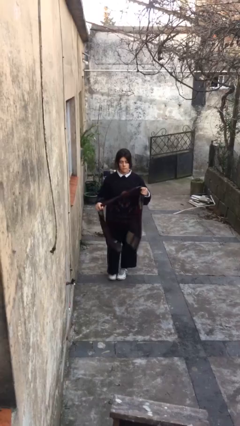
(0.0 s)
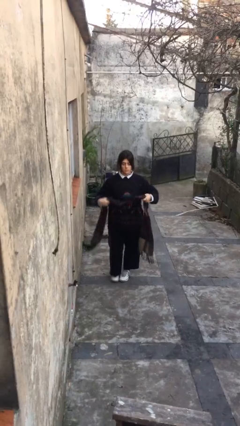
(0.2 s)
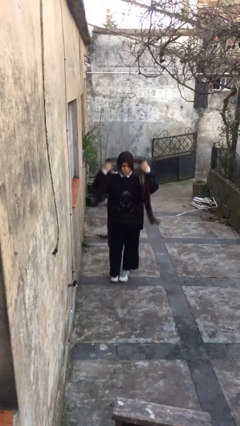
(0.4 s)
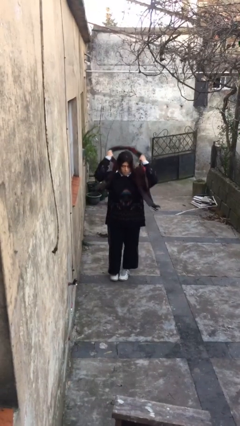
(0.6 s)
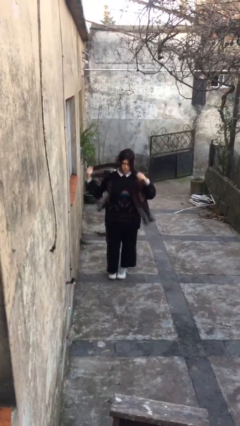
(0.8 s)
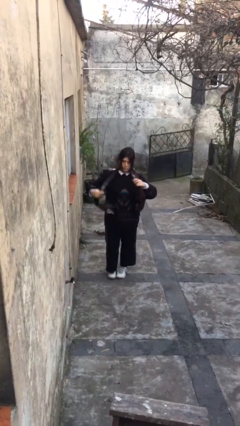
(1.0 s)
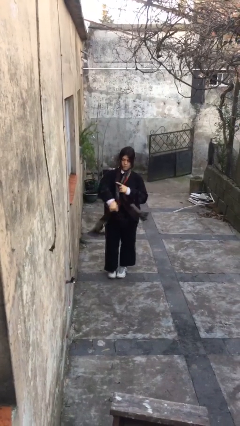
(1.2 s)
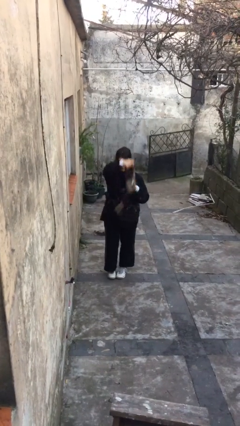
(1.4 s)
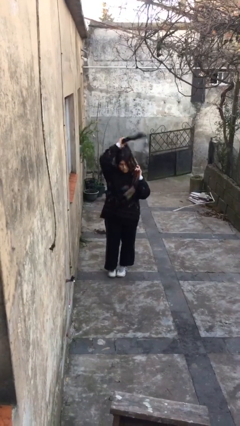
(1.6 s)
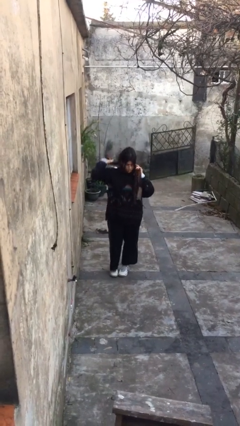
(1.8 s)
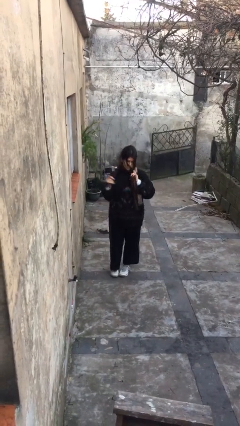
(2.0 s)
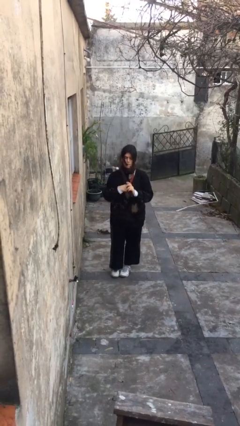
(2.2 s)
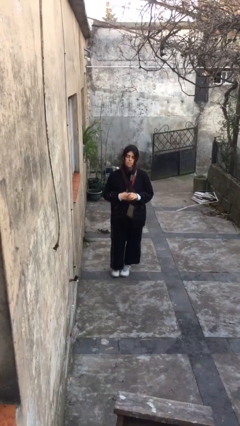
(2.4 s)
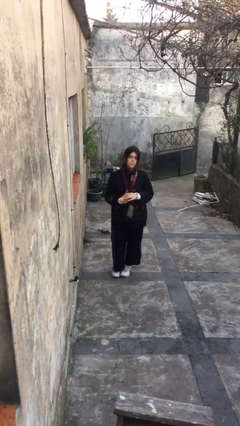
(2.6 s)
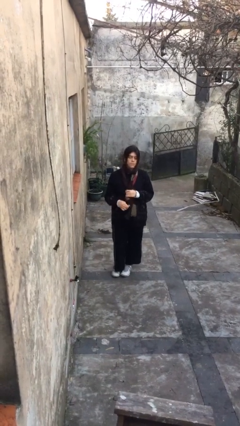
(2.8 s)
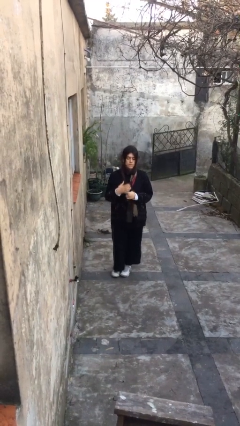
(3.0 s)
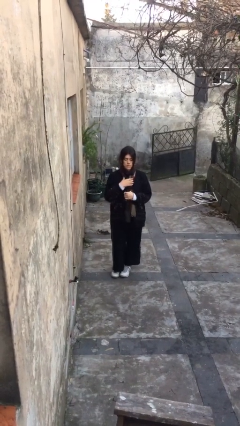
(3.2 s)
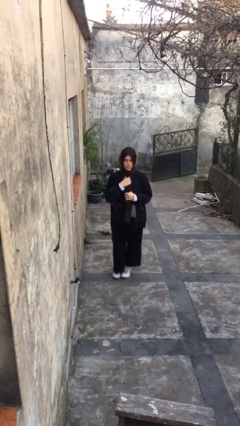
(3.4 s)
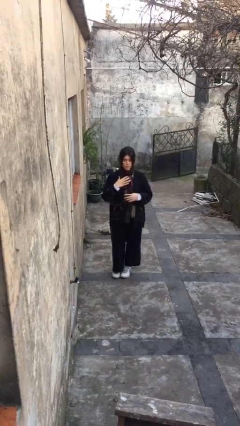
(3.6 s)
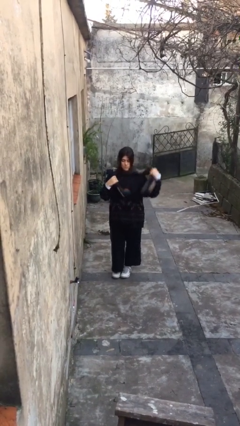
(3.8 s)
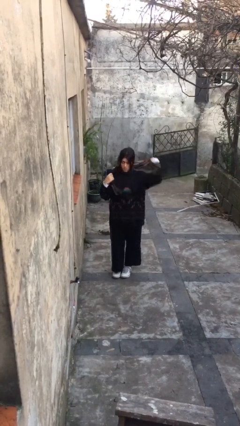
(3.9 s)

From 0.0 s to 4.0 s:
person puts on scarf

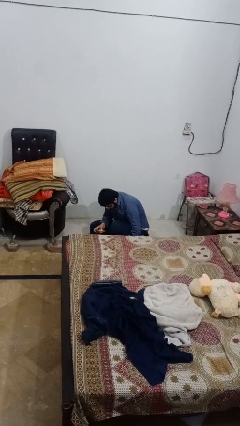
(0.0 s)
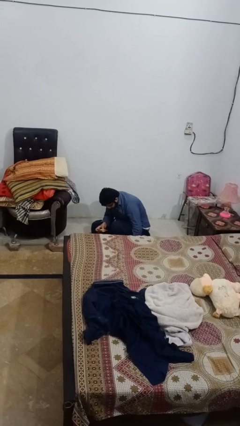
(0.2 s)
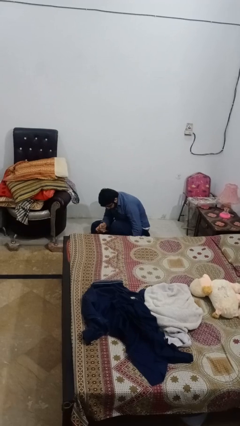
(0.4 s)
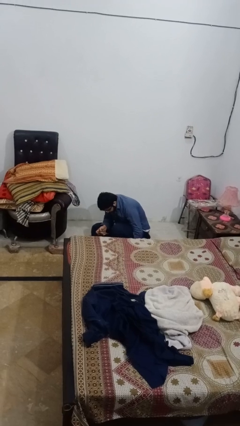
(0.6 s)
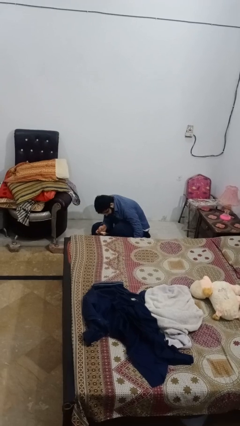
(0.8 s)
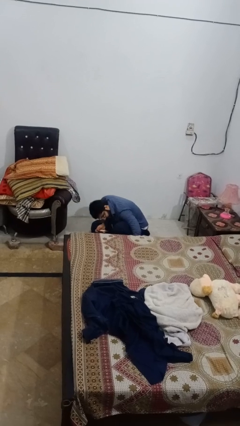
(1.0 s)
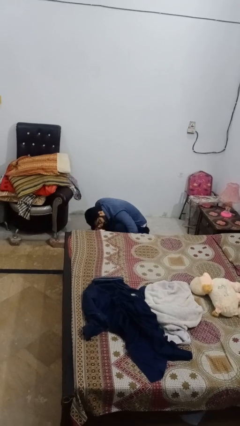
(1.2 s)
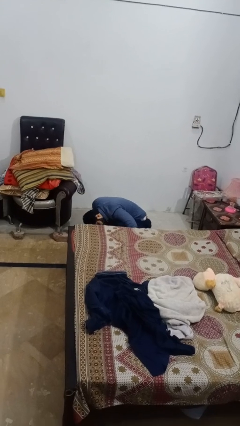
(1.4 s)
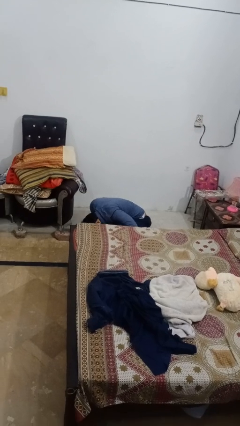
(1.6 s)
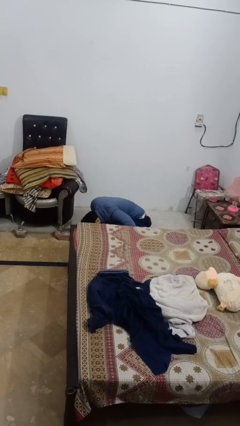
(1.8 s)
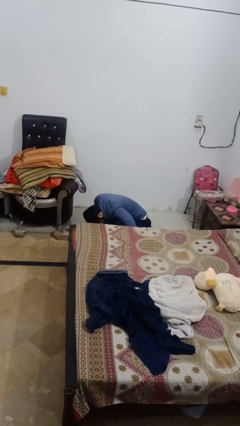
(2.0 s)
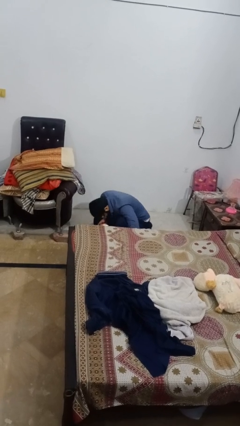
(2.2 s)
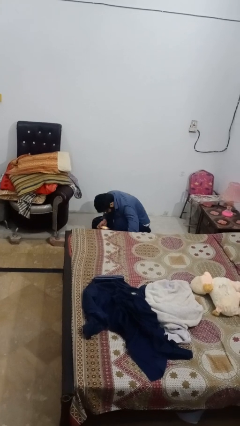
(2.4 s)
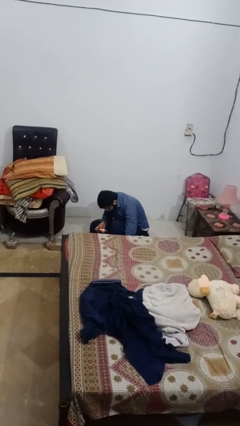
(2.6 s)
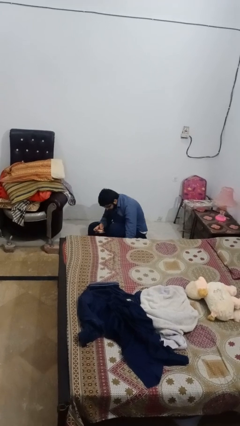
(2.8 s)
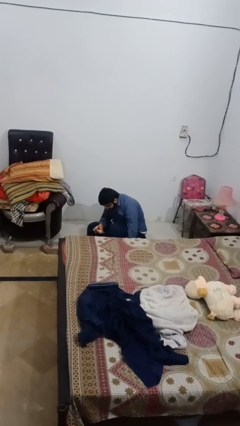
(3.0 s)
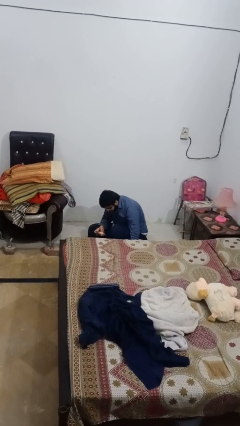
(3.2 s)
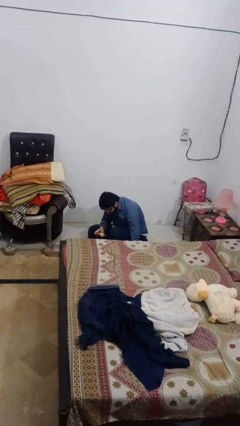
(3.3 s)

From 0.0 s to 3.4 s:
person searches under bed

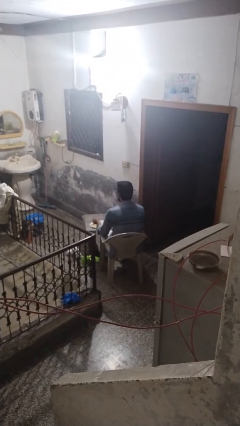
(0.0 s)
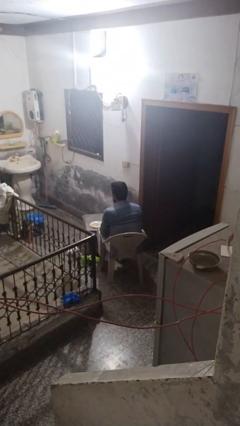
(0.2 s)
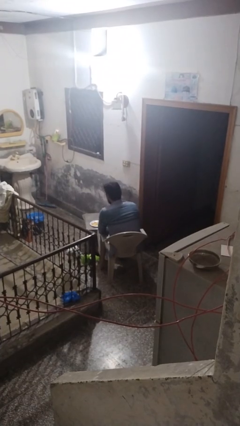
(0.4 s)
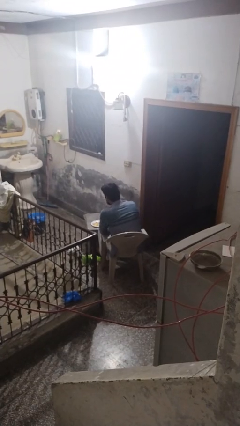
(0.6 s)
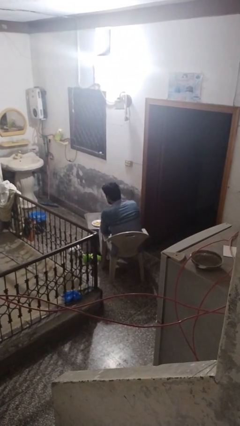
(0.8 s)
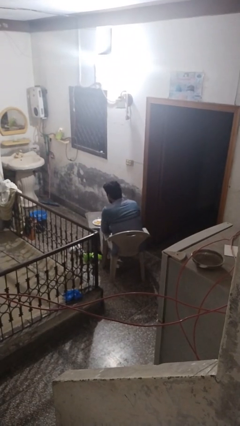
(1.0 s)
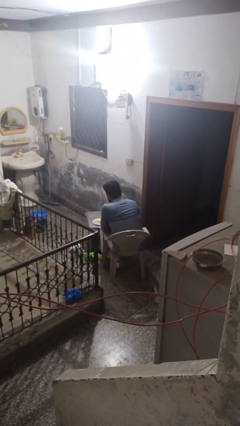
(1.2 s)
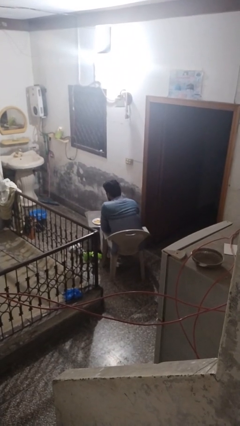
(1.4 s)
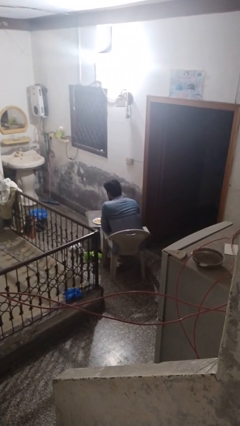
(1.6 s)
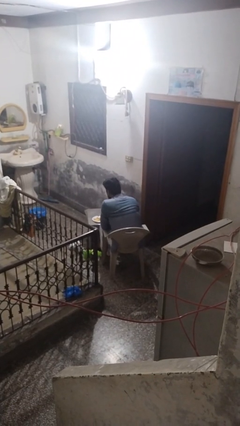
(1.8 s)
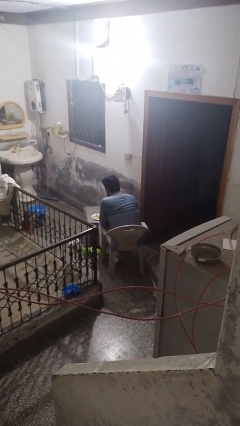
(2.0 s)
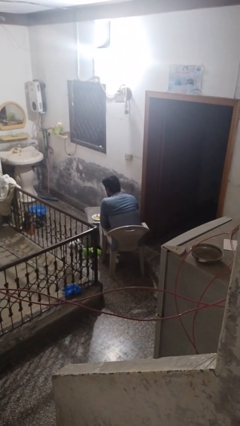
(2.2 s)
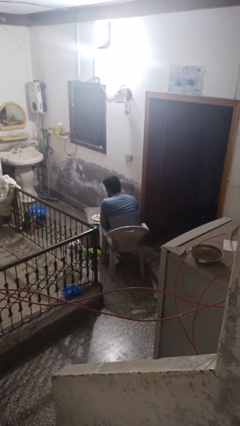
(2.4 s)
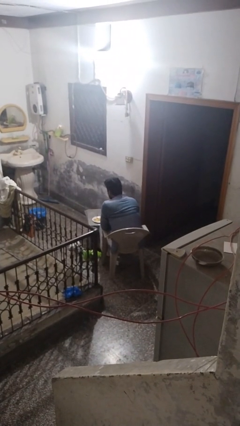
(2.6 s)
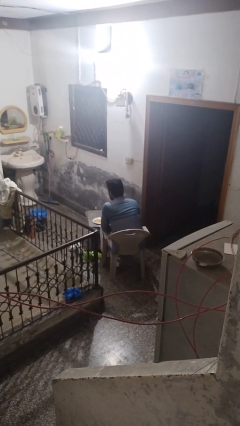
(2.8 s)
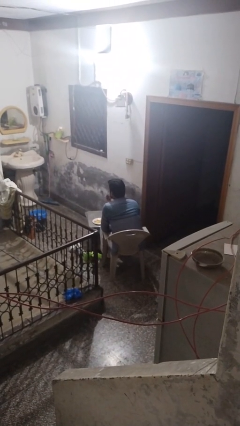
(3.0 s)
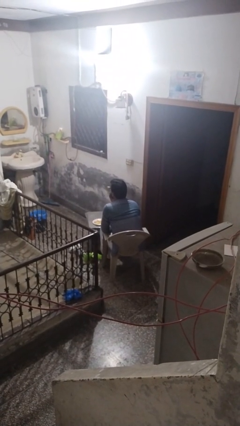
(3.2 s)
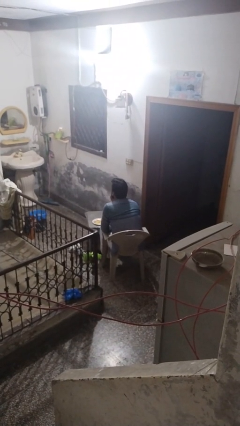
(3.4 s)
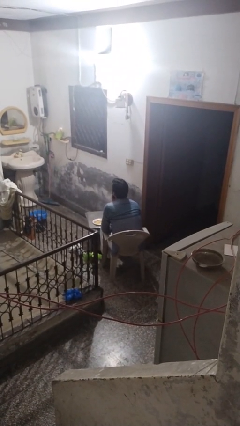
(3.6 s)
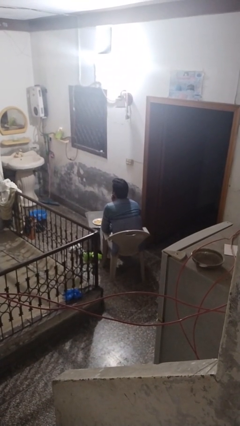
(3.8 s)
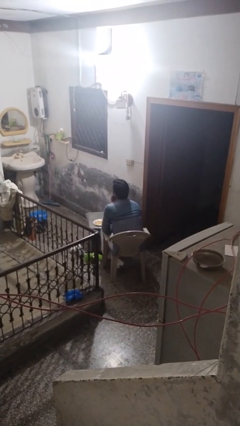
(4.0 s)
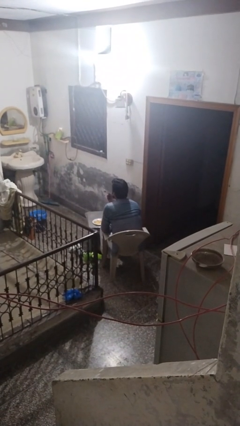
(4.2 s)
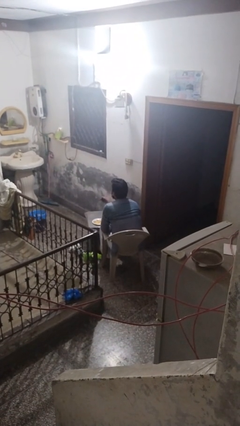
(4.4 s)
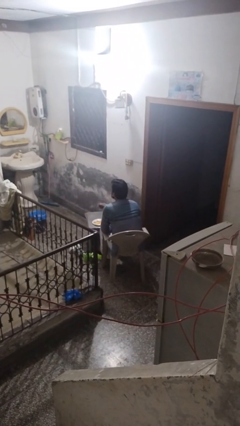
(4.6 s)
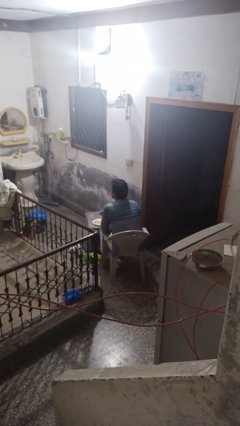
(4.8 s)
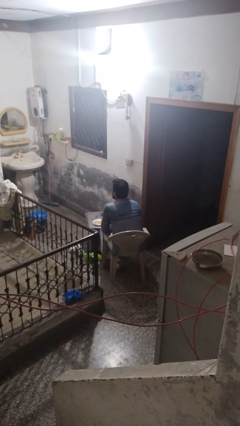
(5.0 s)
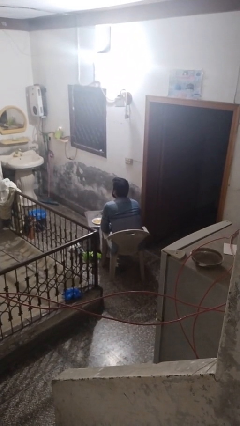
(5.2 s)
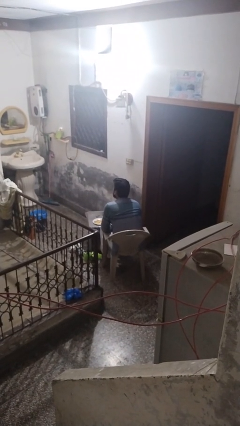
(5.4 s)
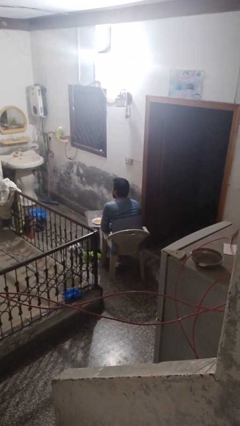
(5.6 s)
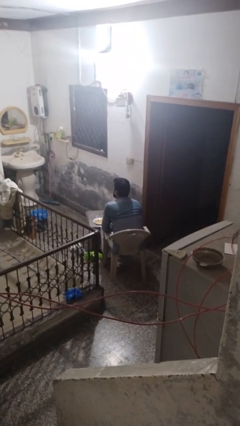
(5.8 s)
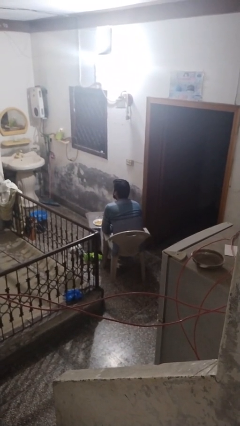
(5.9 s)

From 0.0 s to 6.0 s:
person eats with utensil

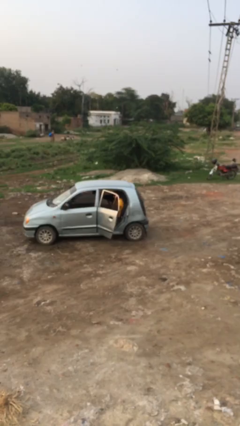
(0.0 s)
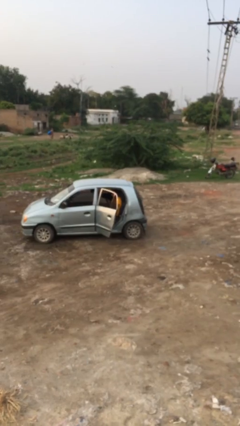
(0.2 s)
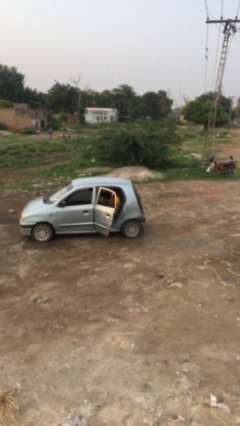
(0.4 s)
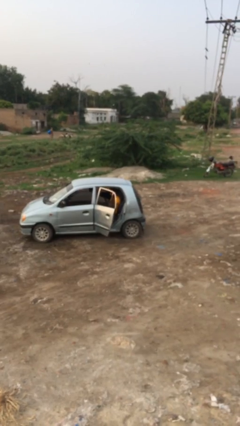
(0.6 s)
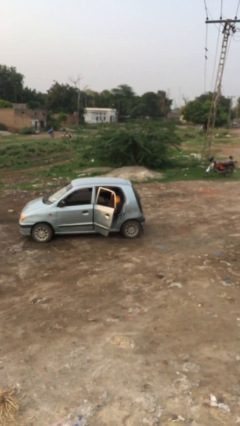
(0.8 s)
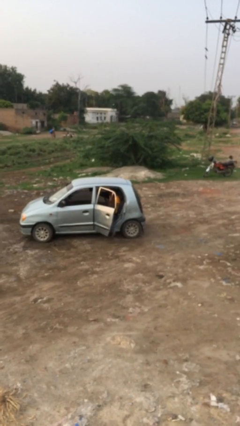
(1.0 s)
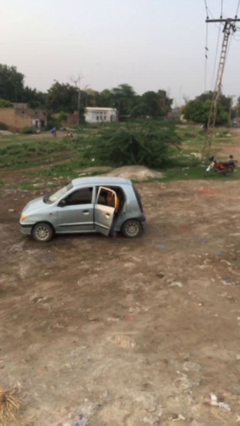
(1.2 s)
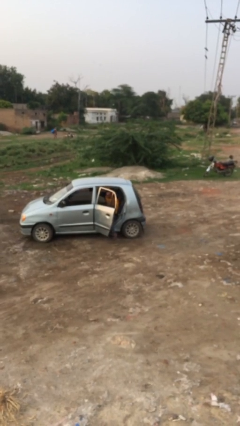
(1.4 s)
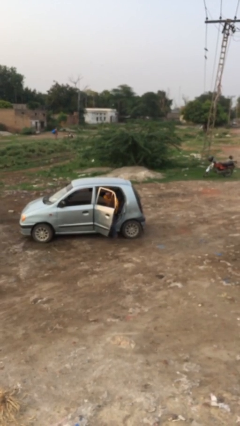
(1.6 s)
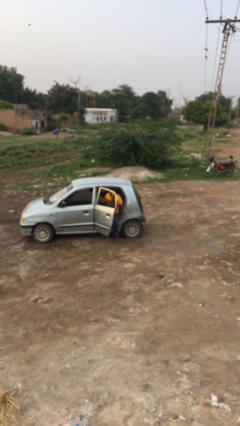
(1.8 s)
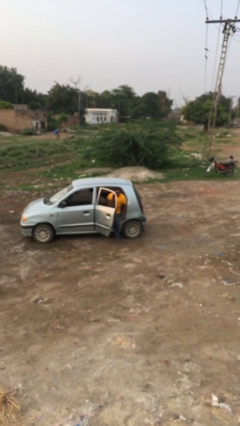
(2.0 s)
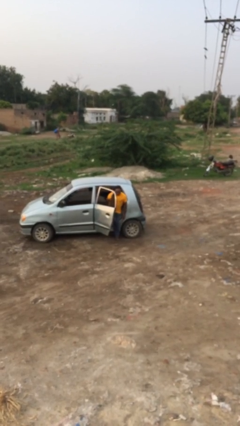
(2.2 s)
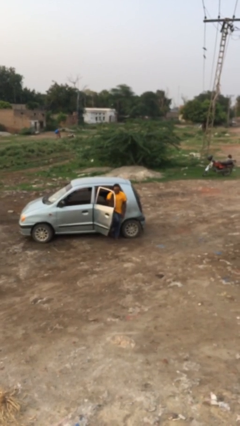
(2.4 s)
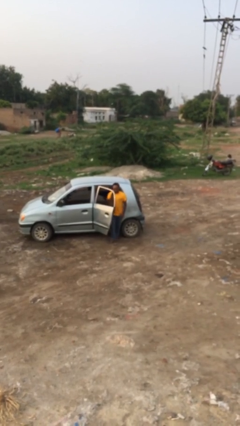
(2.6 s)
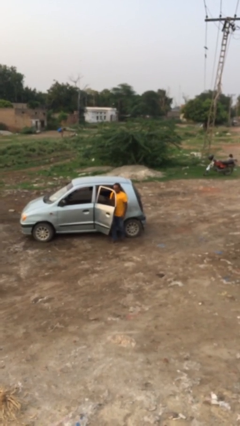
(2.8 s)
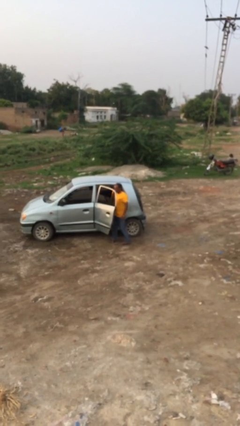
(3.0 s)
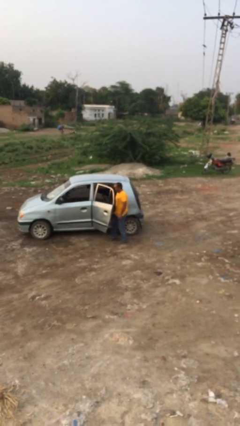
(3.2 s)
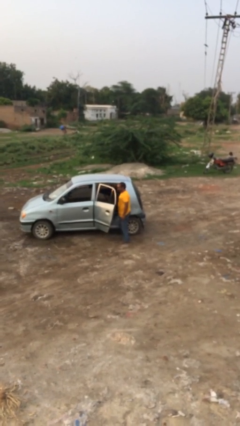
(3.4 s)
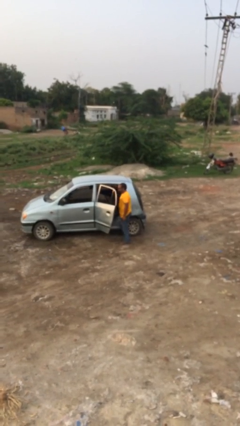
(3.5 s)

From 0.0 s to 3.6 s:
person exits car

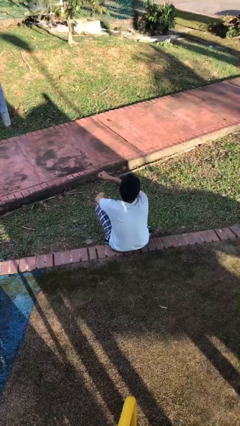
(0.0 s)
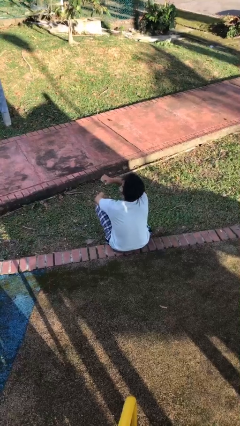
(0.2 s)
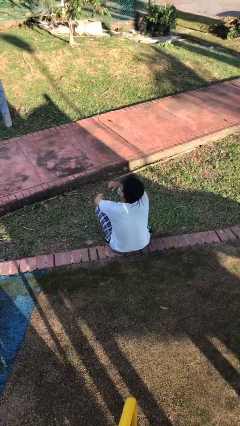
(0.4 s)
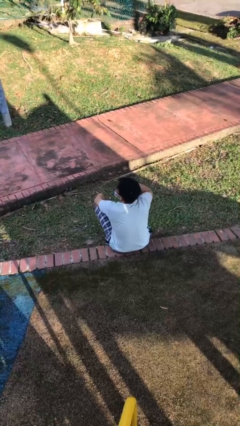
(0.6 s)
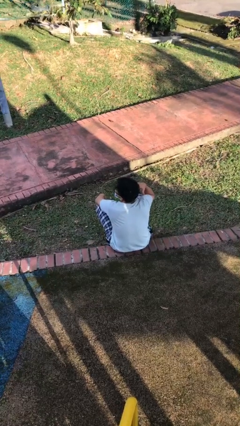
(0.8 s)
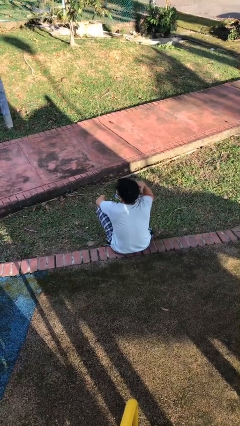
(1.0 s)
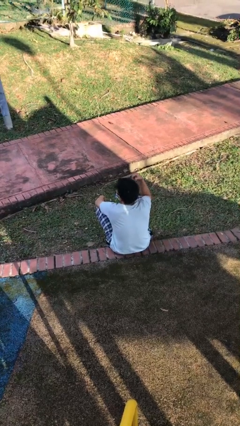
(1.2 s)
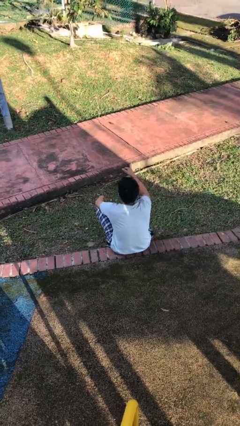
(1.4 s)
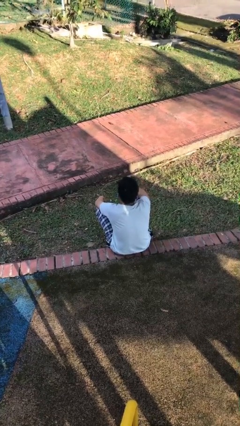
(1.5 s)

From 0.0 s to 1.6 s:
person gestures cut
